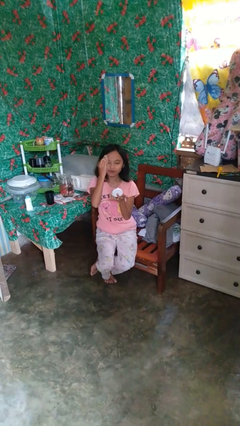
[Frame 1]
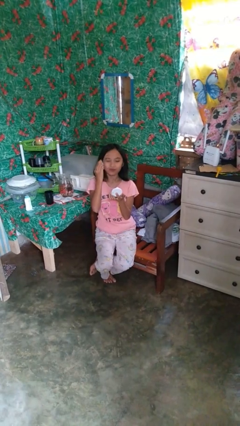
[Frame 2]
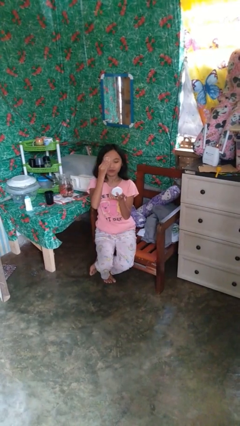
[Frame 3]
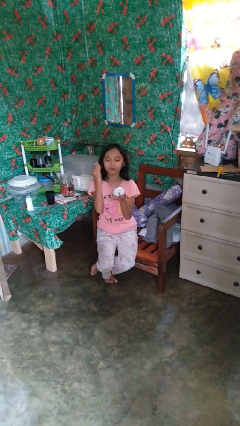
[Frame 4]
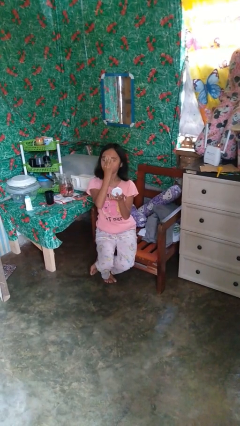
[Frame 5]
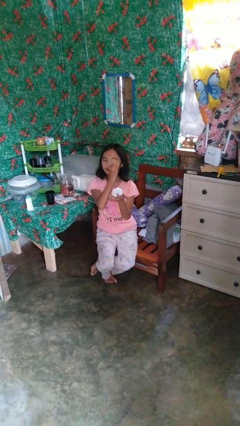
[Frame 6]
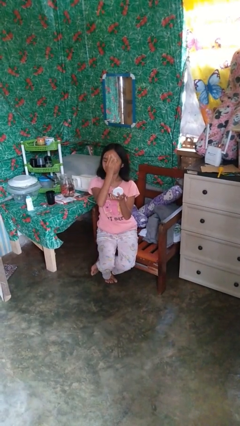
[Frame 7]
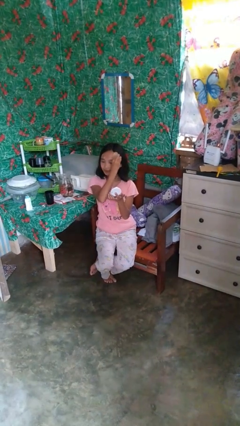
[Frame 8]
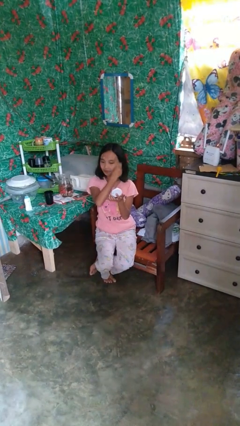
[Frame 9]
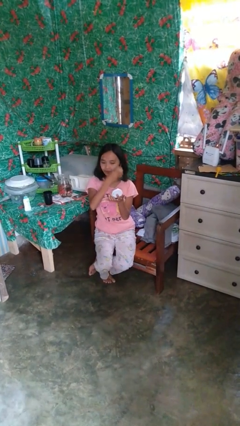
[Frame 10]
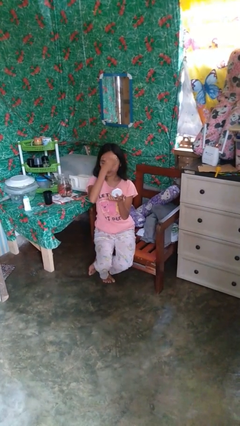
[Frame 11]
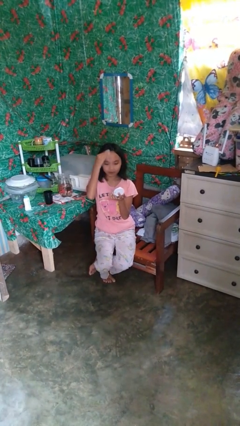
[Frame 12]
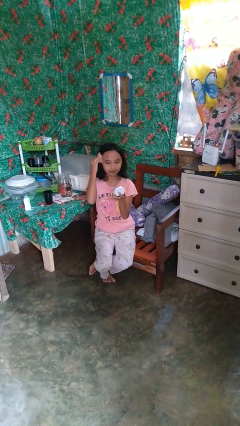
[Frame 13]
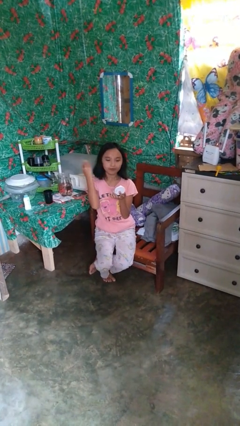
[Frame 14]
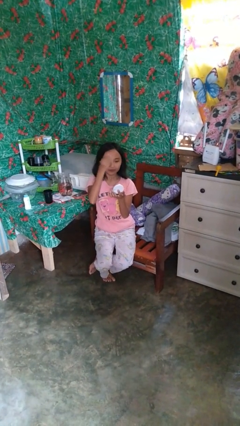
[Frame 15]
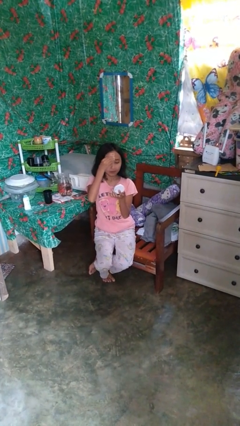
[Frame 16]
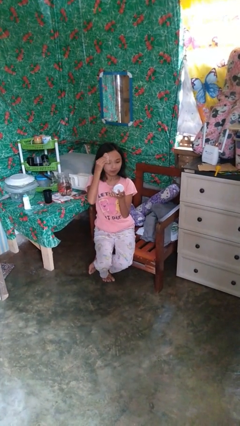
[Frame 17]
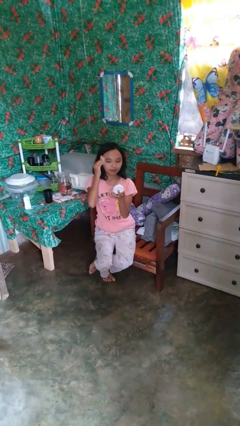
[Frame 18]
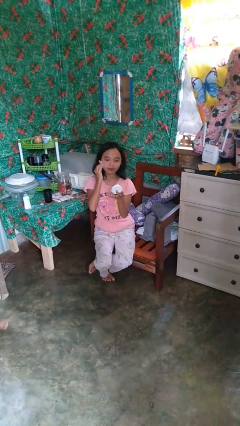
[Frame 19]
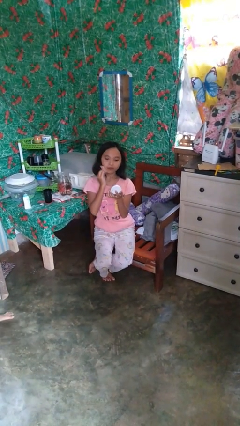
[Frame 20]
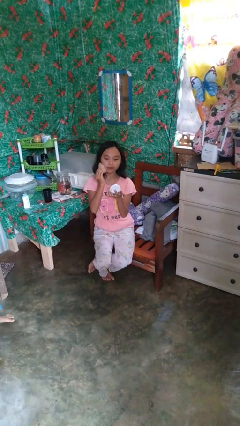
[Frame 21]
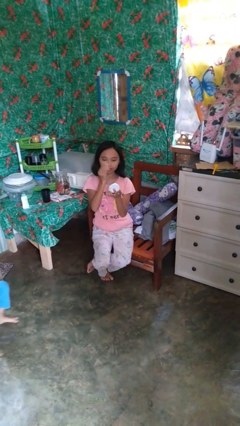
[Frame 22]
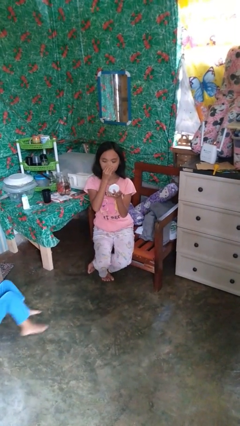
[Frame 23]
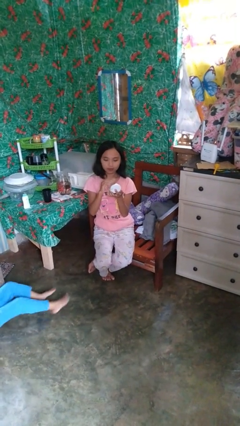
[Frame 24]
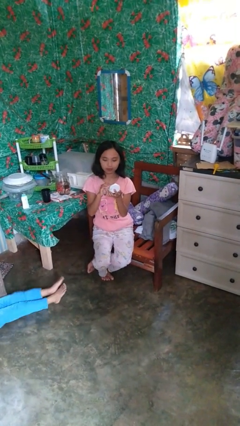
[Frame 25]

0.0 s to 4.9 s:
person applies foundation makeup

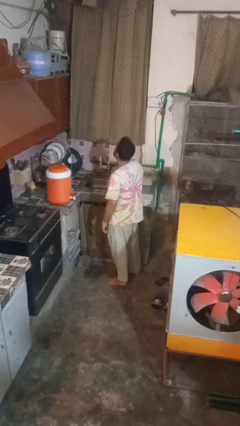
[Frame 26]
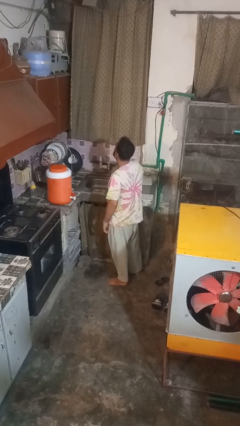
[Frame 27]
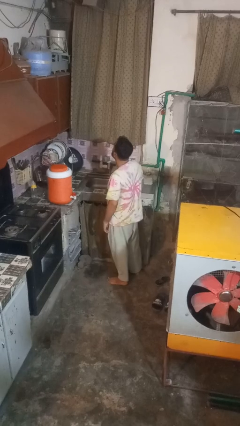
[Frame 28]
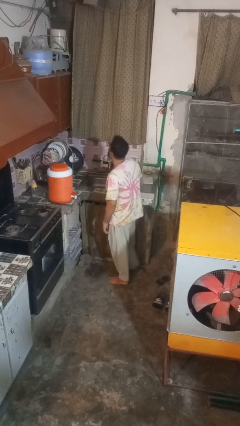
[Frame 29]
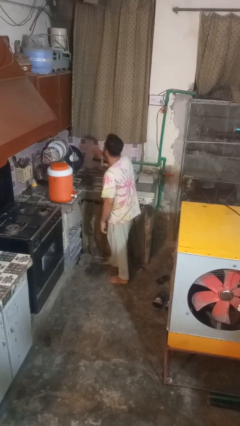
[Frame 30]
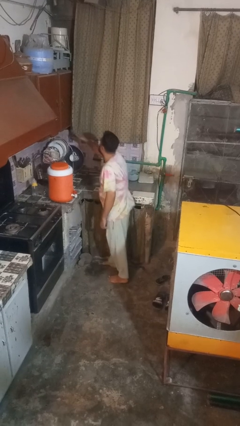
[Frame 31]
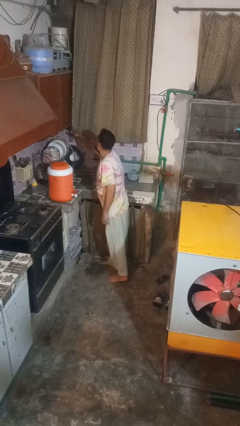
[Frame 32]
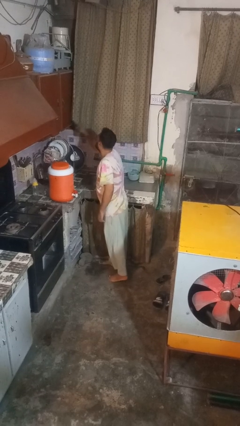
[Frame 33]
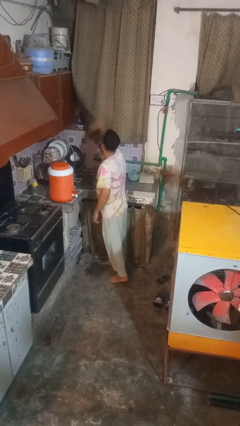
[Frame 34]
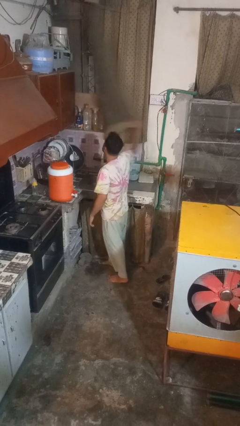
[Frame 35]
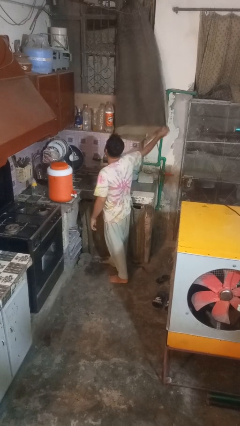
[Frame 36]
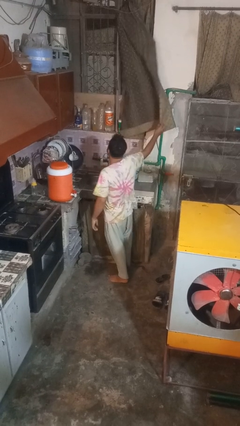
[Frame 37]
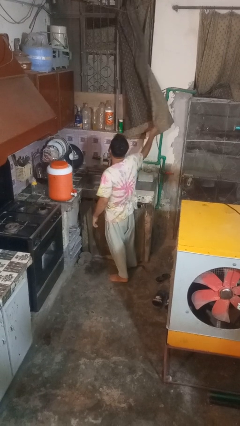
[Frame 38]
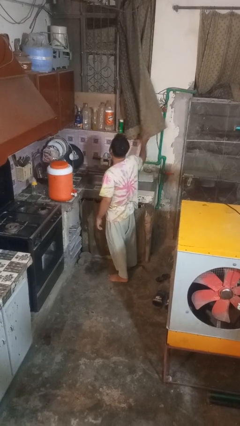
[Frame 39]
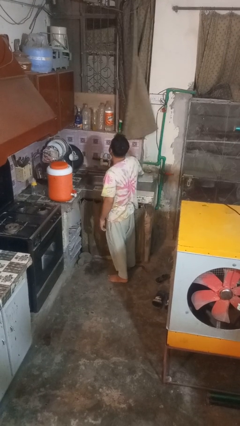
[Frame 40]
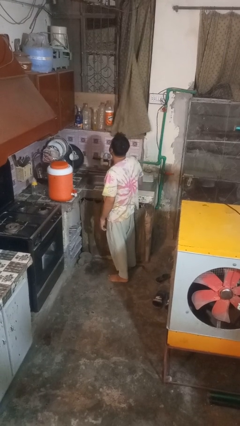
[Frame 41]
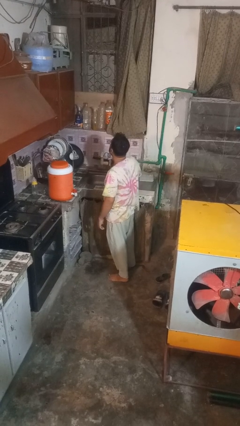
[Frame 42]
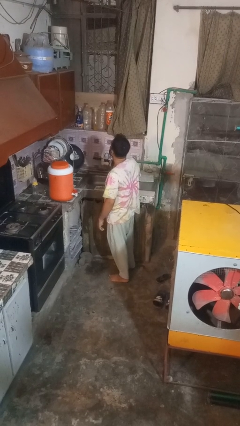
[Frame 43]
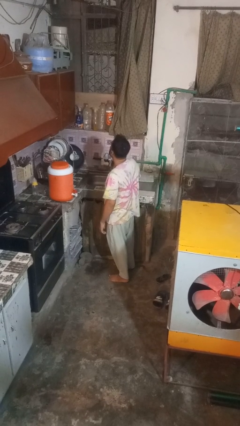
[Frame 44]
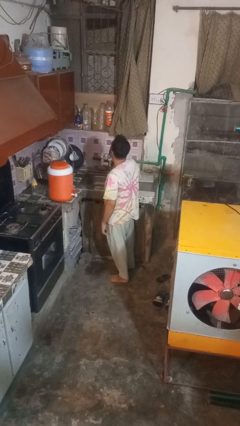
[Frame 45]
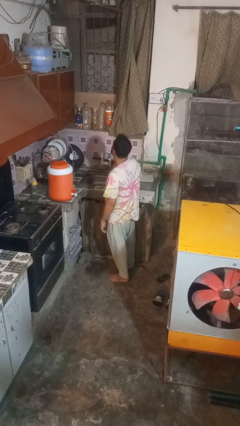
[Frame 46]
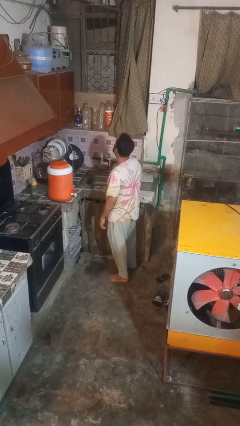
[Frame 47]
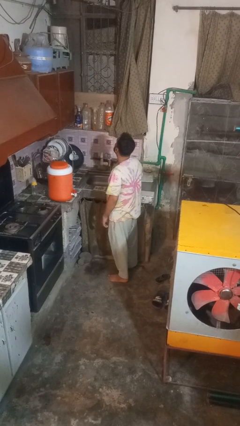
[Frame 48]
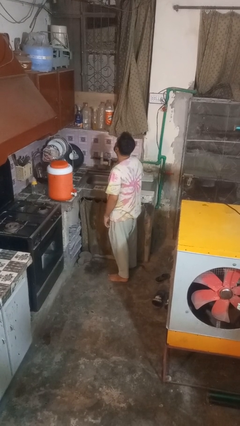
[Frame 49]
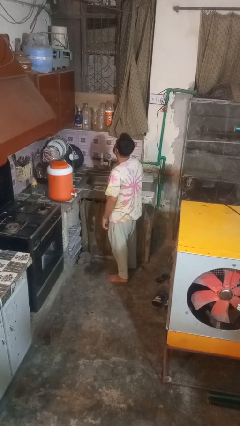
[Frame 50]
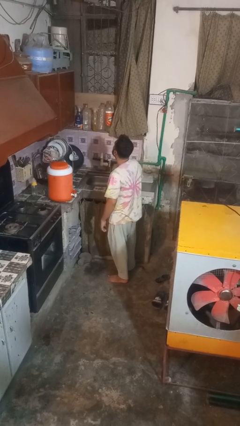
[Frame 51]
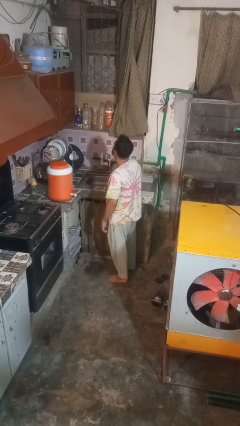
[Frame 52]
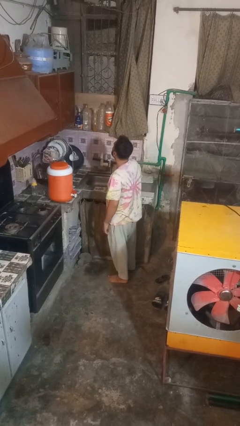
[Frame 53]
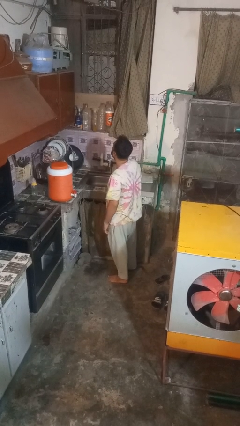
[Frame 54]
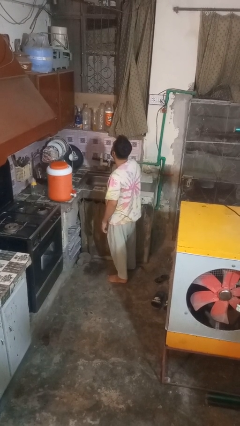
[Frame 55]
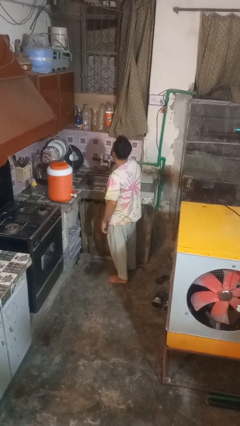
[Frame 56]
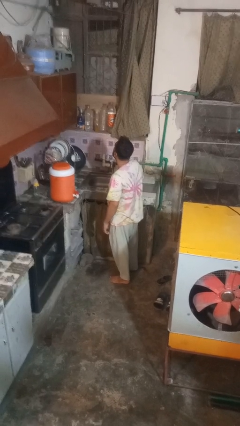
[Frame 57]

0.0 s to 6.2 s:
person opens curtains

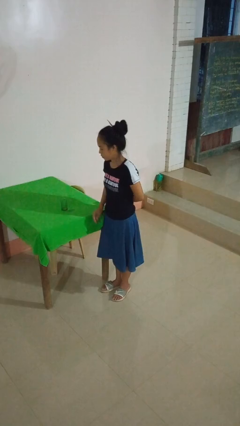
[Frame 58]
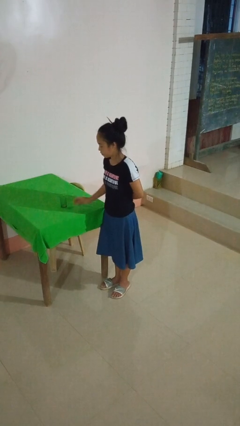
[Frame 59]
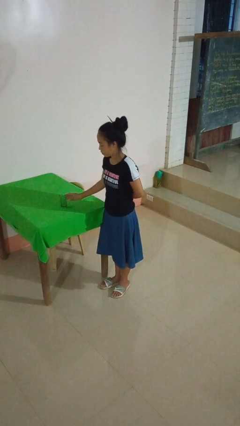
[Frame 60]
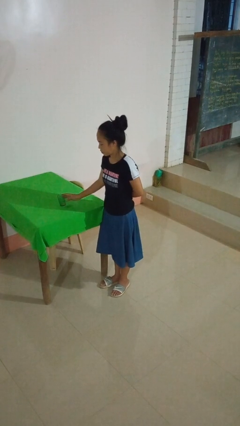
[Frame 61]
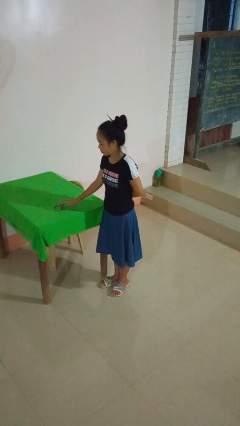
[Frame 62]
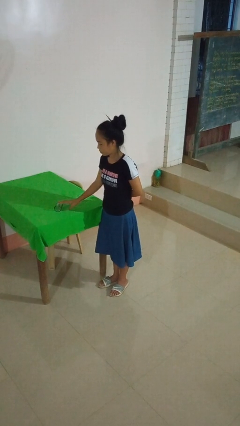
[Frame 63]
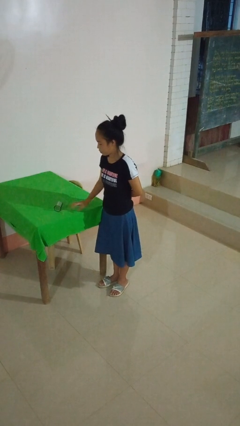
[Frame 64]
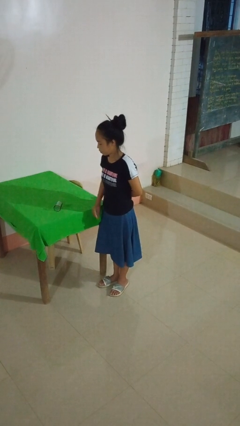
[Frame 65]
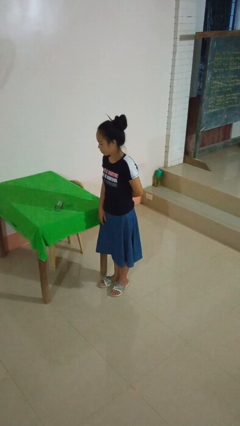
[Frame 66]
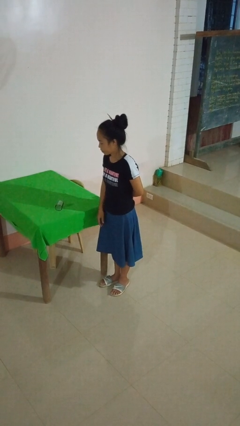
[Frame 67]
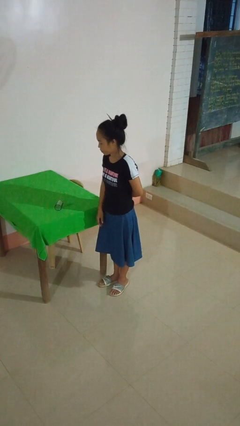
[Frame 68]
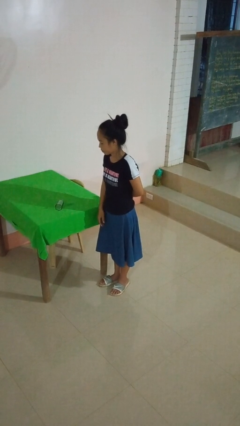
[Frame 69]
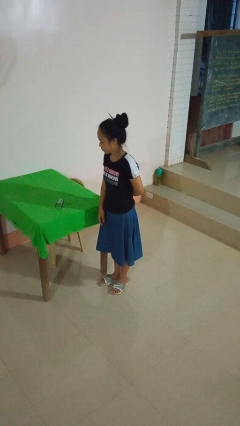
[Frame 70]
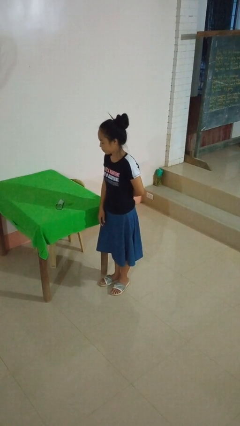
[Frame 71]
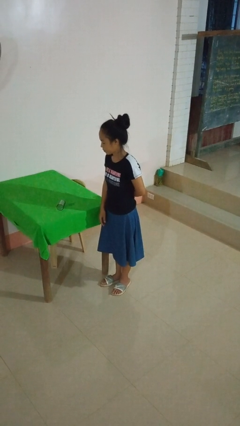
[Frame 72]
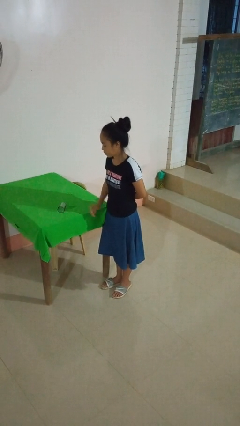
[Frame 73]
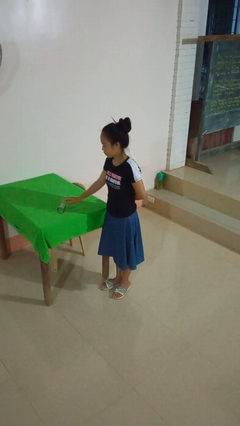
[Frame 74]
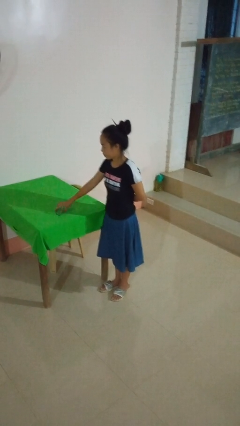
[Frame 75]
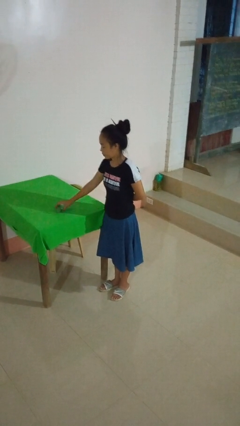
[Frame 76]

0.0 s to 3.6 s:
person knocks over glass

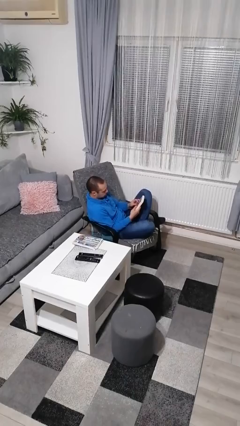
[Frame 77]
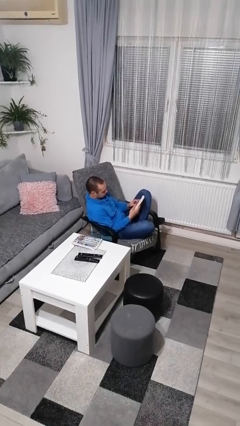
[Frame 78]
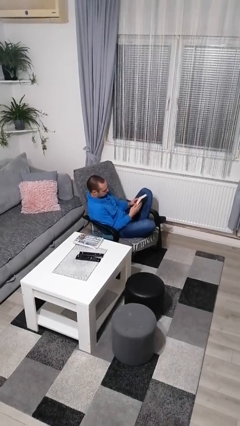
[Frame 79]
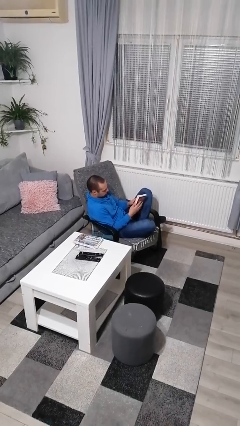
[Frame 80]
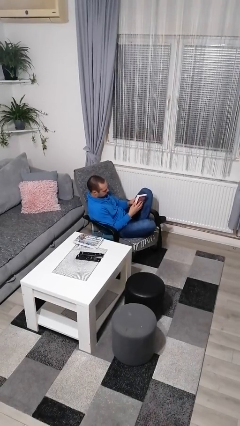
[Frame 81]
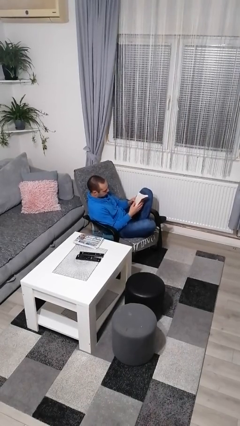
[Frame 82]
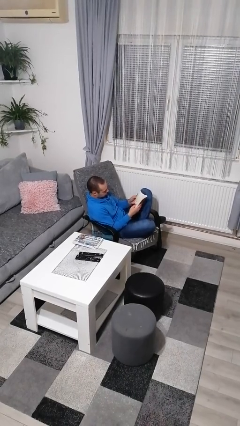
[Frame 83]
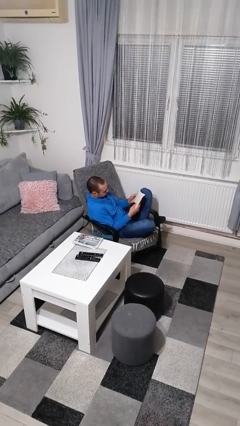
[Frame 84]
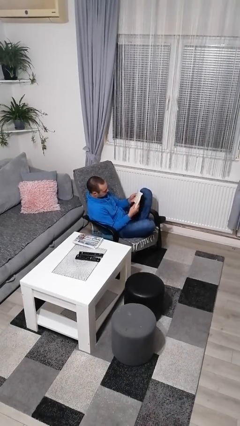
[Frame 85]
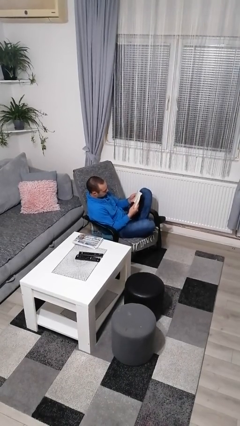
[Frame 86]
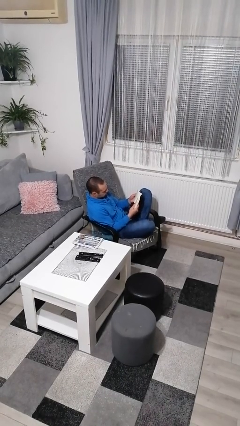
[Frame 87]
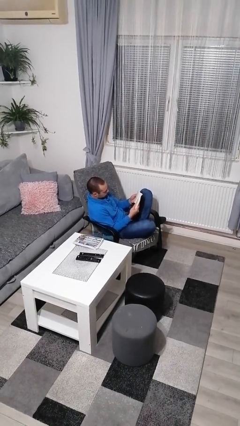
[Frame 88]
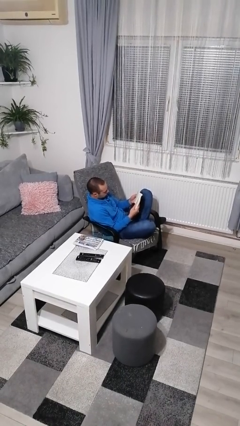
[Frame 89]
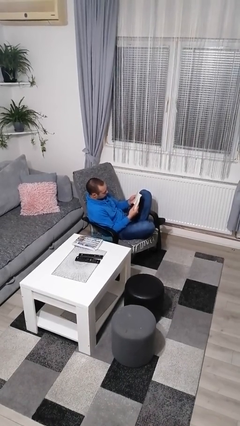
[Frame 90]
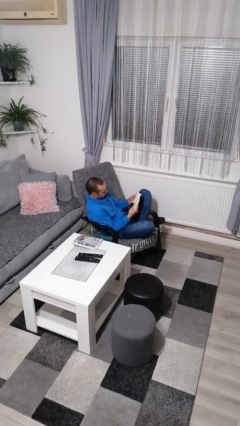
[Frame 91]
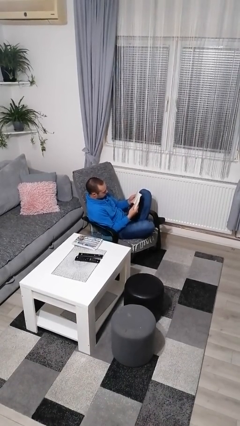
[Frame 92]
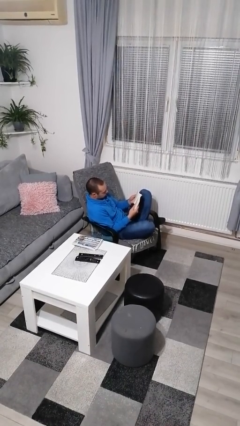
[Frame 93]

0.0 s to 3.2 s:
person reads book
